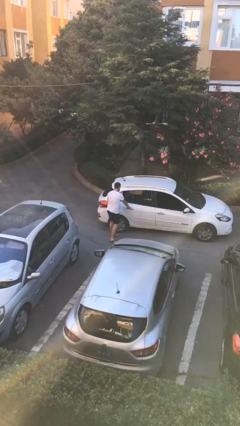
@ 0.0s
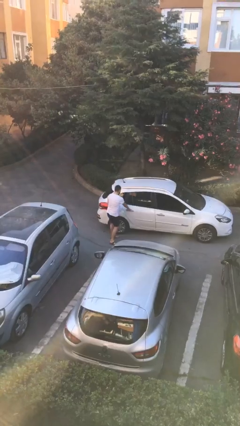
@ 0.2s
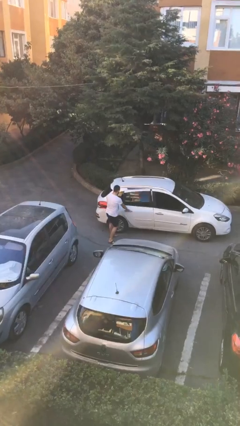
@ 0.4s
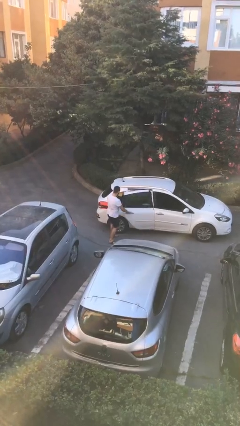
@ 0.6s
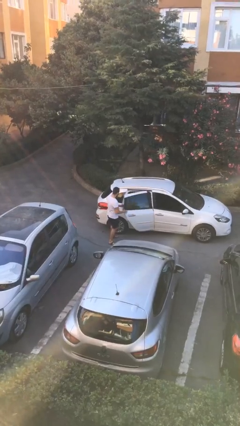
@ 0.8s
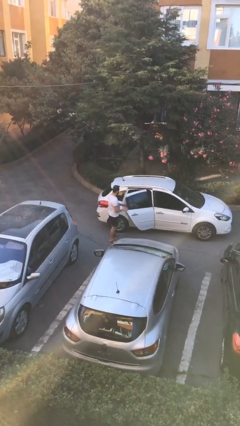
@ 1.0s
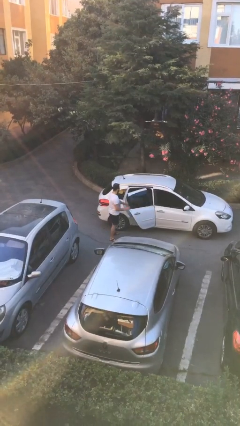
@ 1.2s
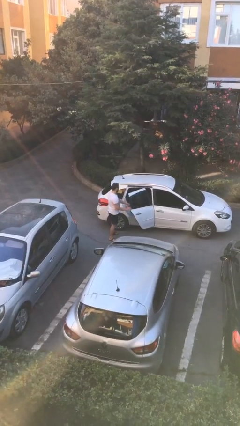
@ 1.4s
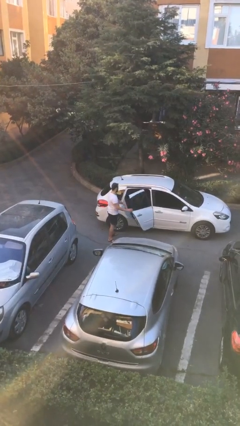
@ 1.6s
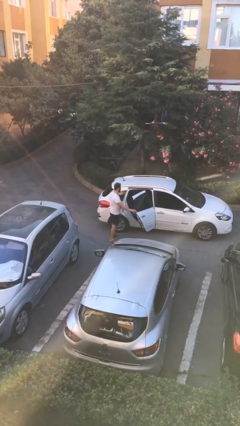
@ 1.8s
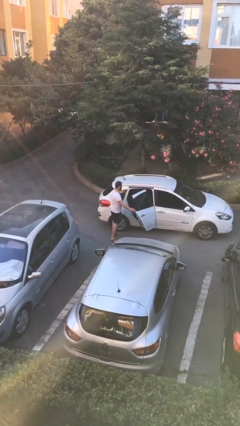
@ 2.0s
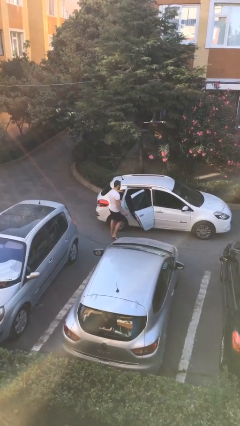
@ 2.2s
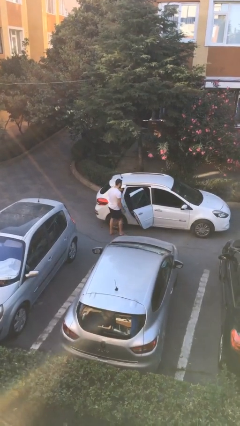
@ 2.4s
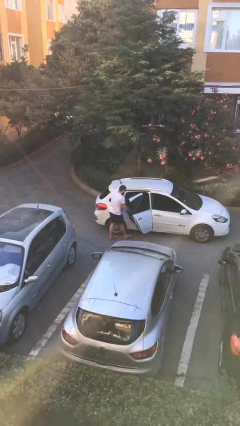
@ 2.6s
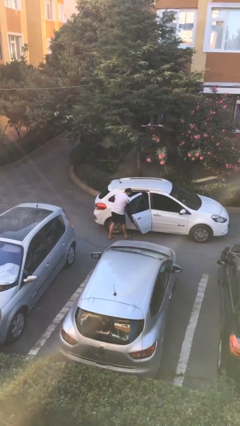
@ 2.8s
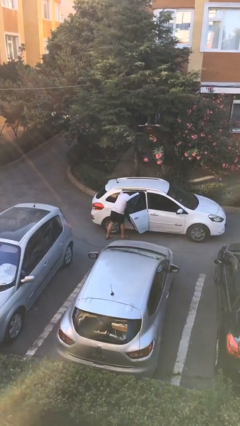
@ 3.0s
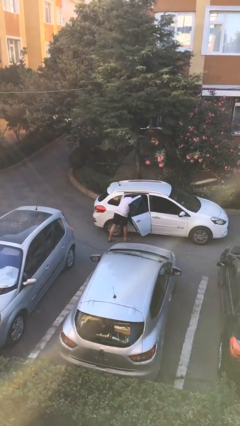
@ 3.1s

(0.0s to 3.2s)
person opens car door

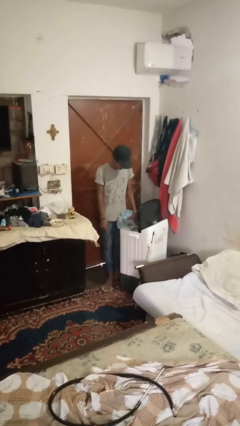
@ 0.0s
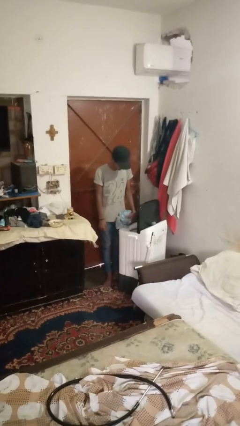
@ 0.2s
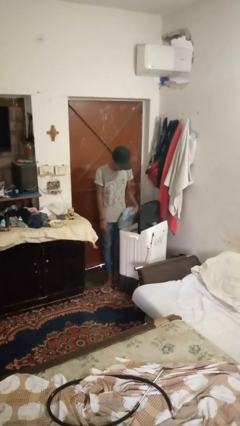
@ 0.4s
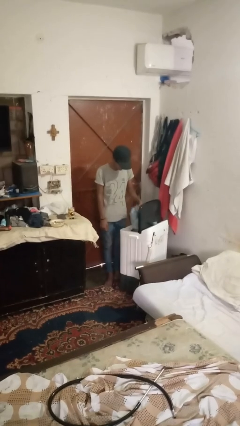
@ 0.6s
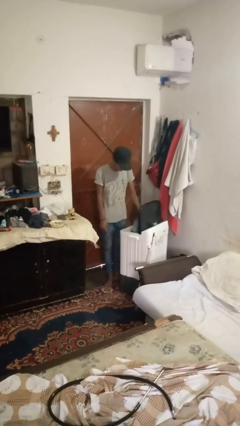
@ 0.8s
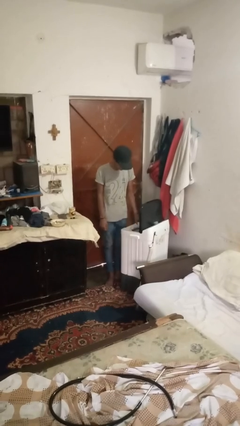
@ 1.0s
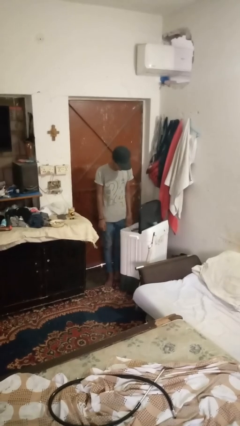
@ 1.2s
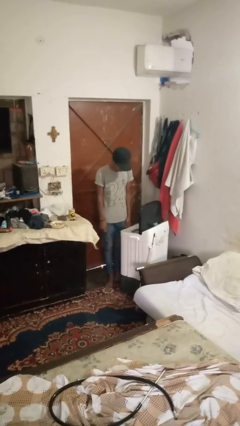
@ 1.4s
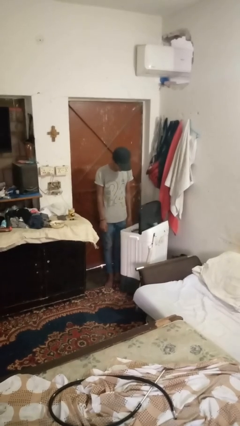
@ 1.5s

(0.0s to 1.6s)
person loads clotheswasher

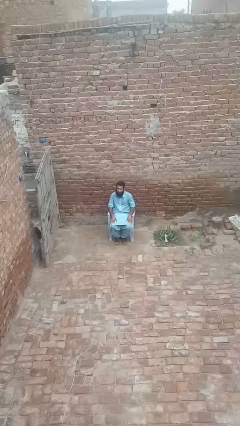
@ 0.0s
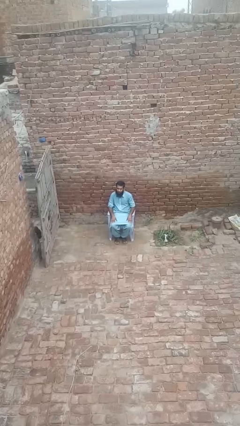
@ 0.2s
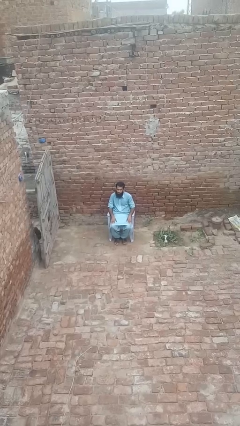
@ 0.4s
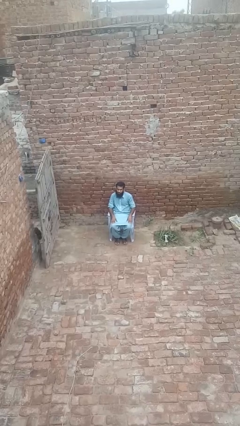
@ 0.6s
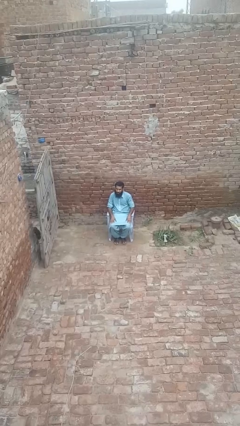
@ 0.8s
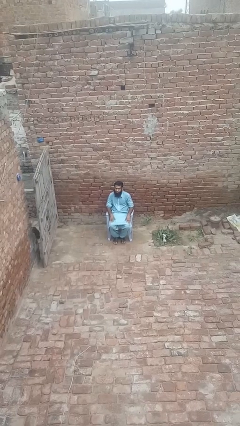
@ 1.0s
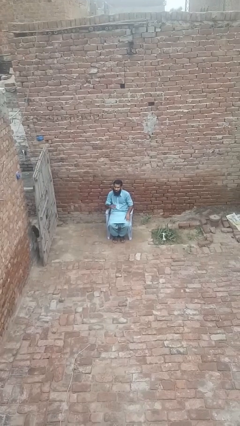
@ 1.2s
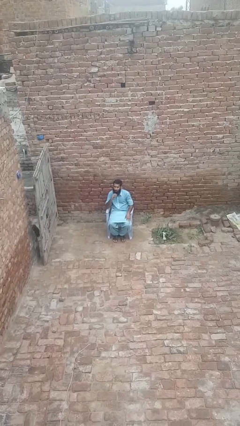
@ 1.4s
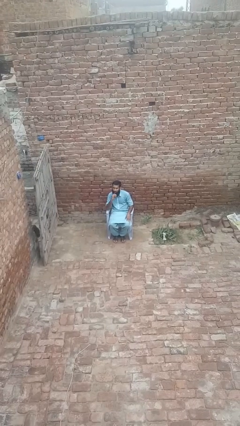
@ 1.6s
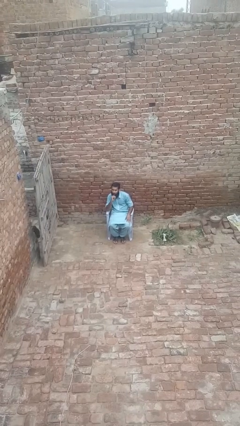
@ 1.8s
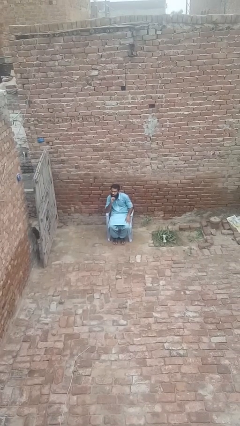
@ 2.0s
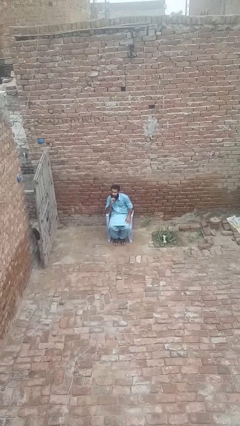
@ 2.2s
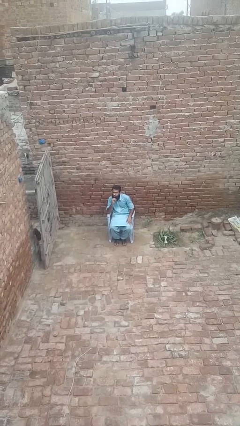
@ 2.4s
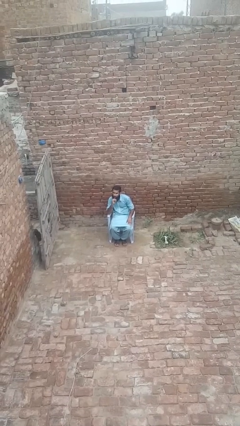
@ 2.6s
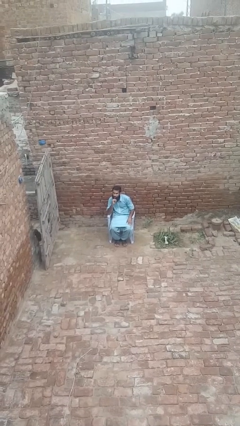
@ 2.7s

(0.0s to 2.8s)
person strokes chin

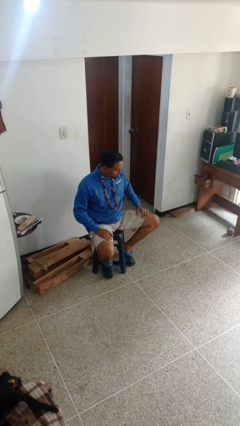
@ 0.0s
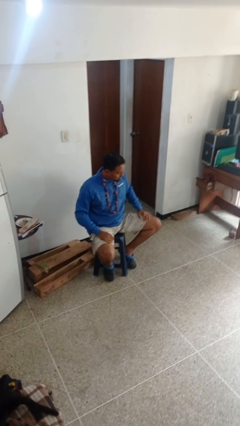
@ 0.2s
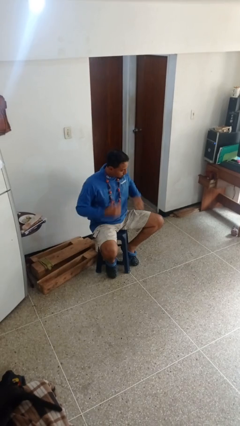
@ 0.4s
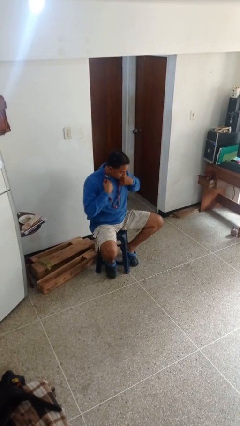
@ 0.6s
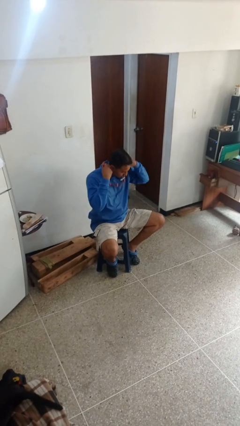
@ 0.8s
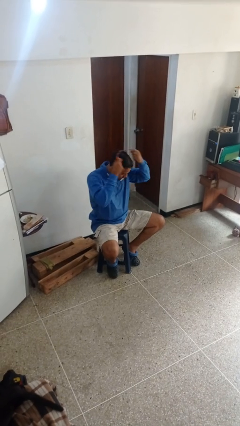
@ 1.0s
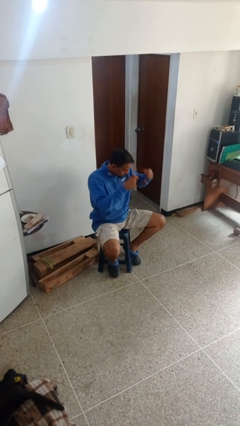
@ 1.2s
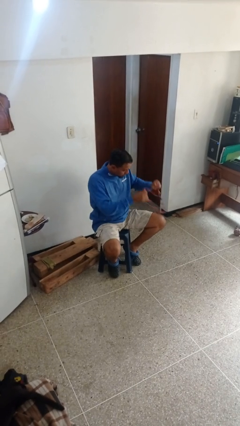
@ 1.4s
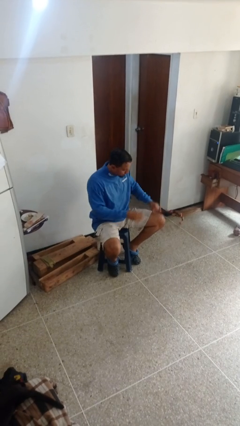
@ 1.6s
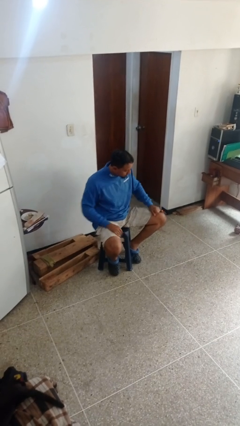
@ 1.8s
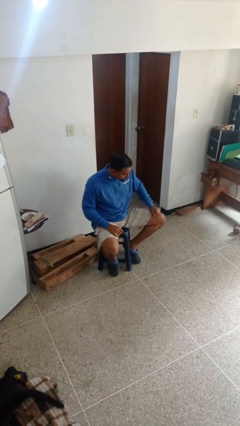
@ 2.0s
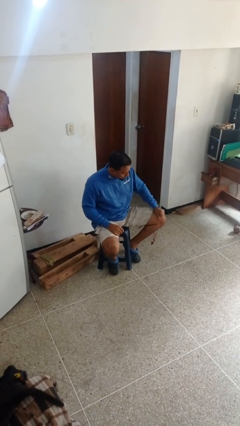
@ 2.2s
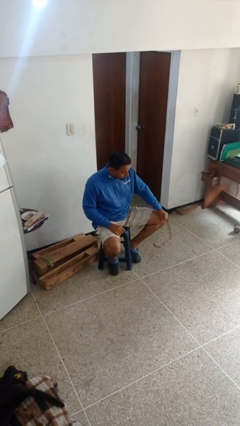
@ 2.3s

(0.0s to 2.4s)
person takes off necklace

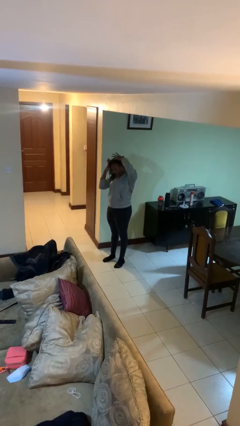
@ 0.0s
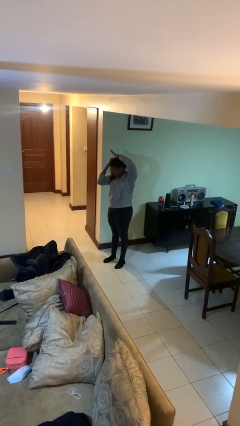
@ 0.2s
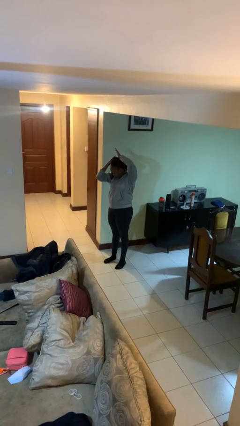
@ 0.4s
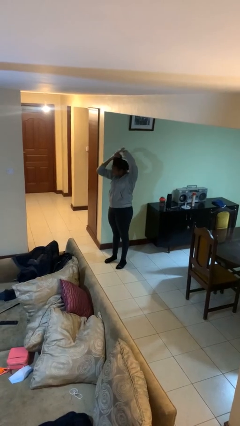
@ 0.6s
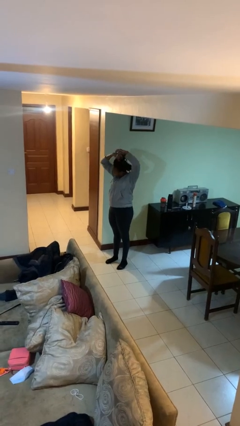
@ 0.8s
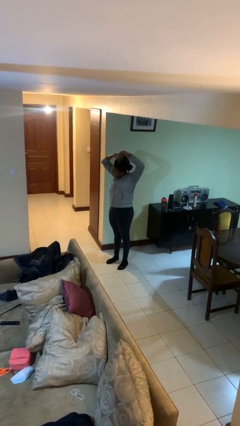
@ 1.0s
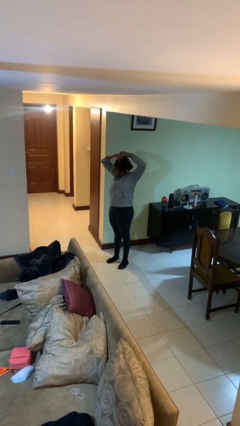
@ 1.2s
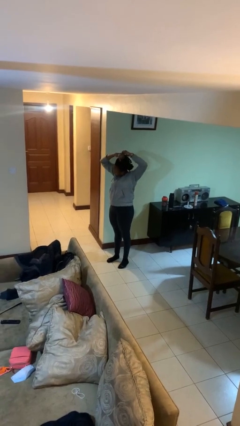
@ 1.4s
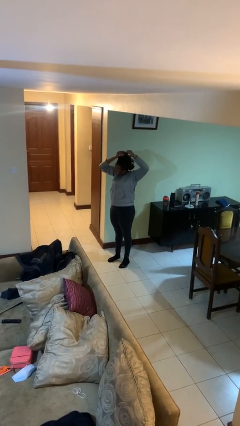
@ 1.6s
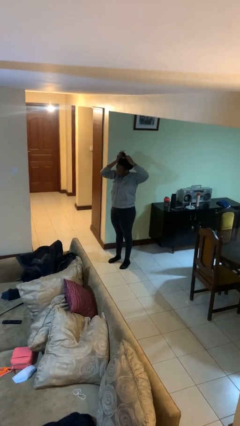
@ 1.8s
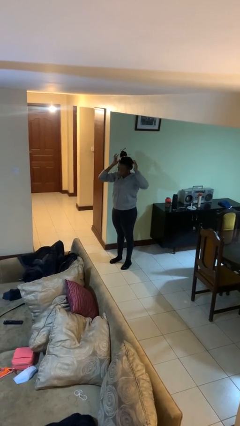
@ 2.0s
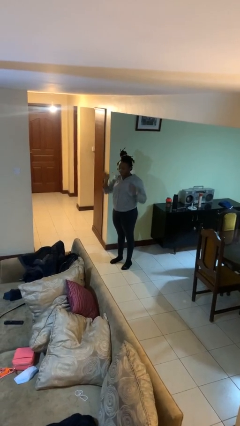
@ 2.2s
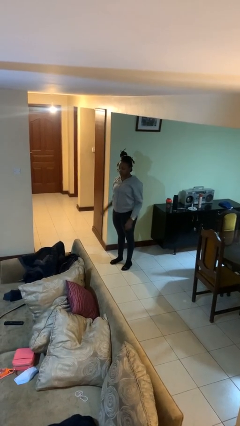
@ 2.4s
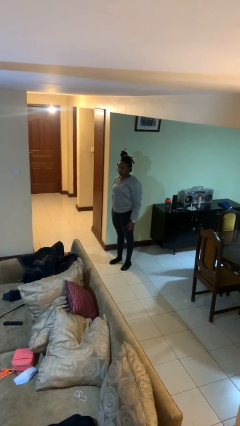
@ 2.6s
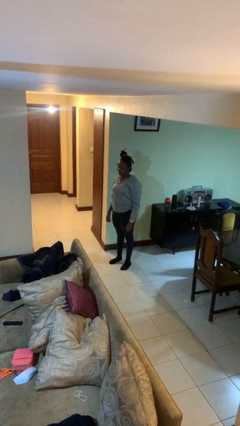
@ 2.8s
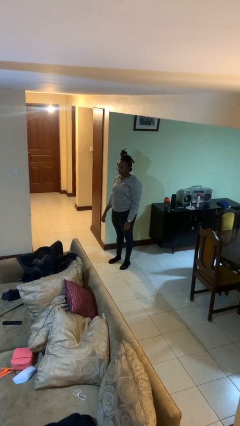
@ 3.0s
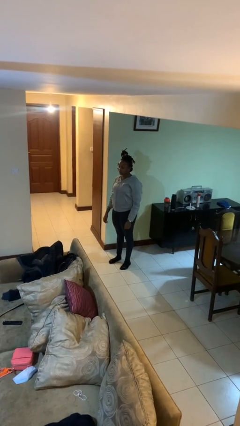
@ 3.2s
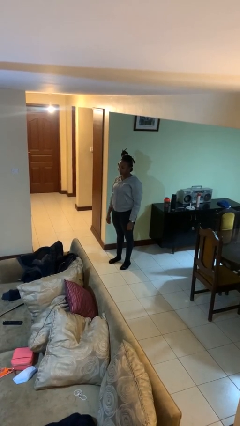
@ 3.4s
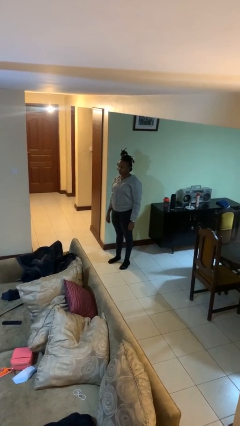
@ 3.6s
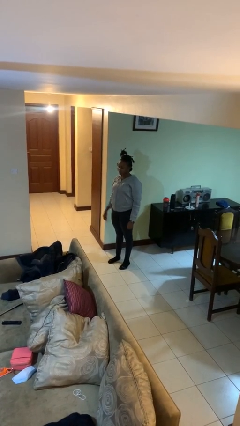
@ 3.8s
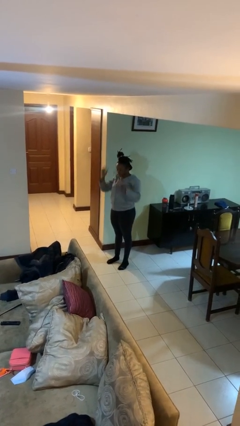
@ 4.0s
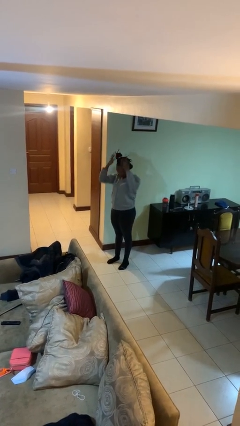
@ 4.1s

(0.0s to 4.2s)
person puts hair in ponytail

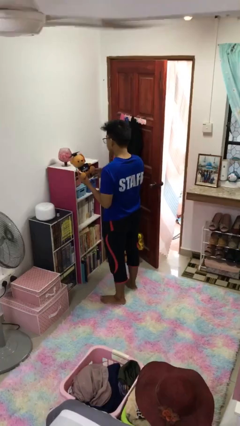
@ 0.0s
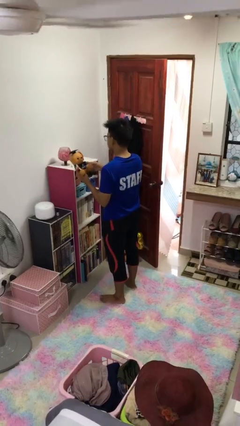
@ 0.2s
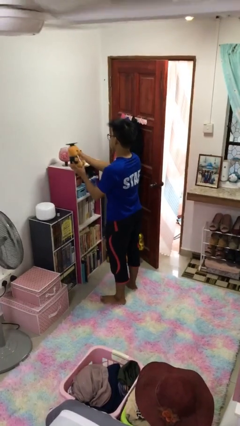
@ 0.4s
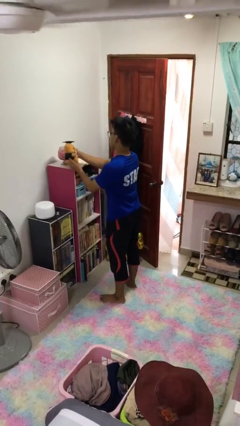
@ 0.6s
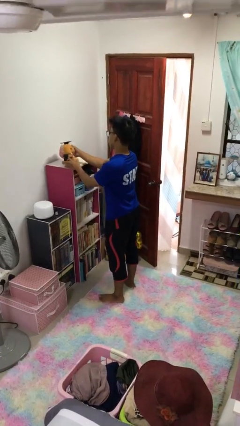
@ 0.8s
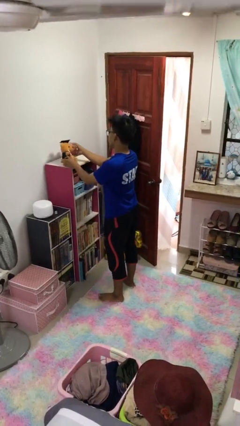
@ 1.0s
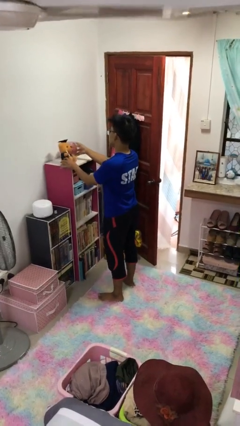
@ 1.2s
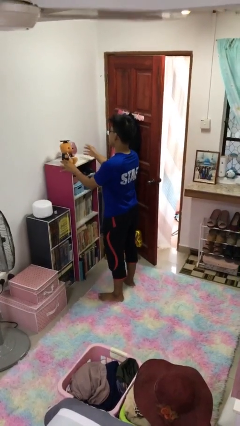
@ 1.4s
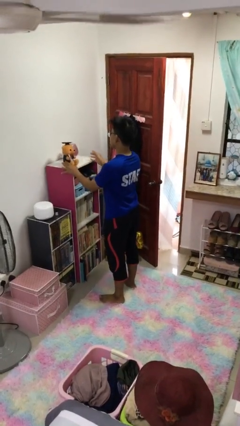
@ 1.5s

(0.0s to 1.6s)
person puts down object on shelf

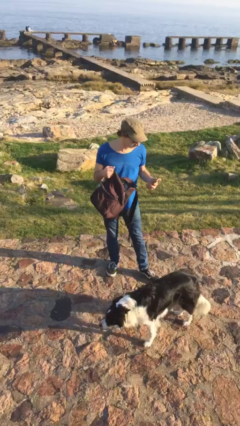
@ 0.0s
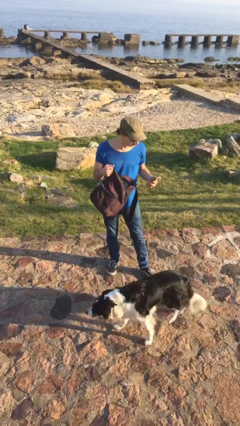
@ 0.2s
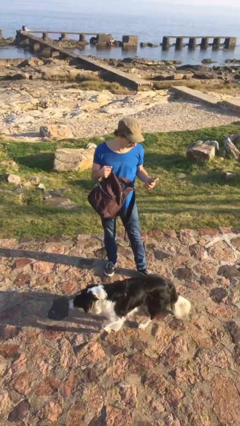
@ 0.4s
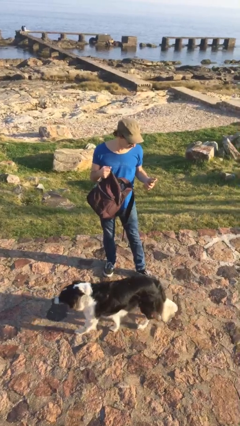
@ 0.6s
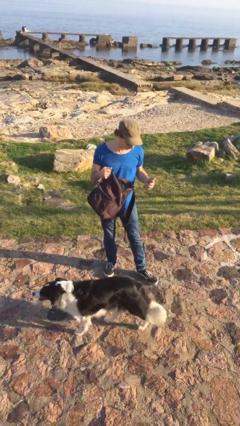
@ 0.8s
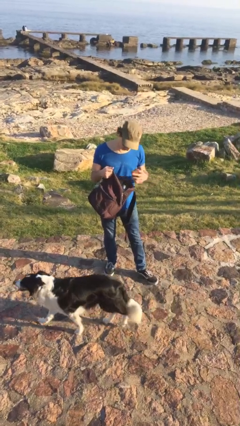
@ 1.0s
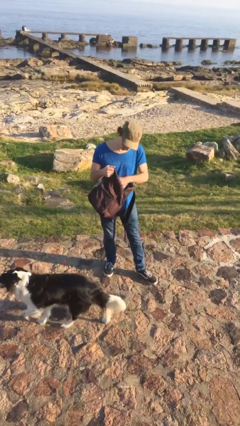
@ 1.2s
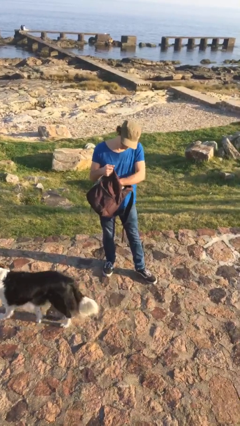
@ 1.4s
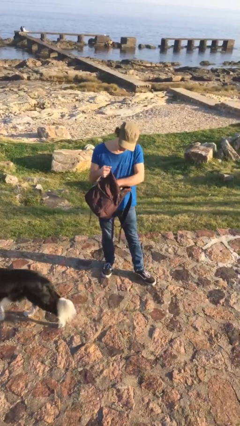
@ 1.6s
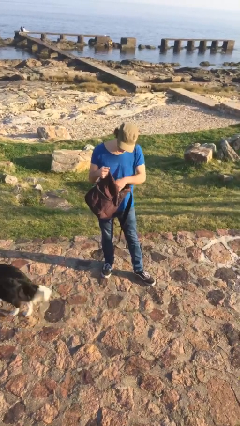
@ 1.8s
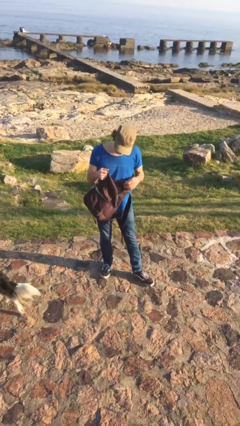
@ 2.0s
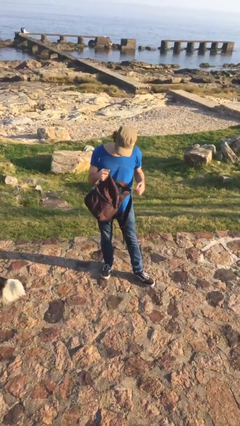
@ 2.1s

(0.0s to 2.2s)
person puts object into backpack
